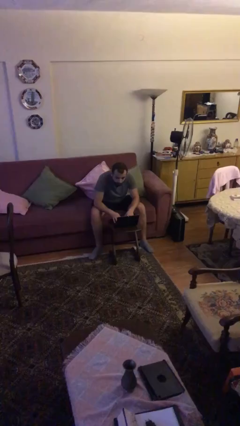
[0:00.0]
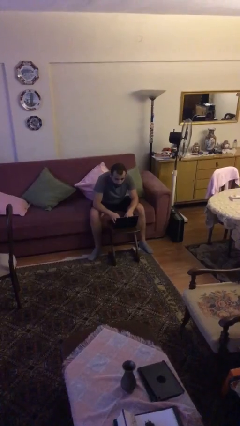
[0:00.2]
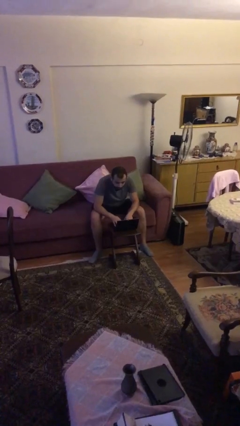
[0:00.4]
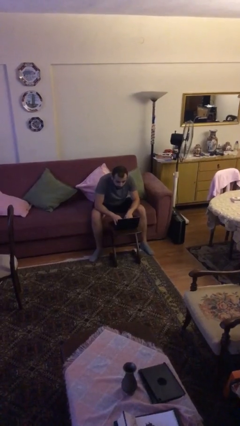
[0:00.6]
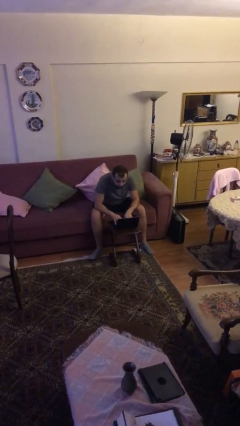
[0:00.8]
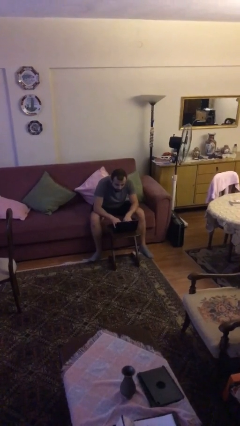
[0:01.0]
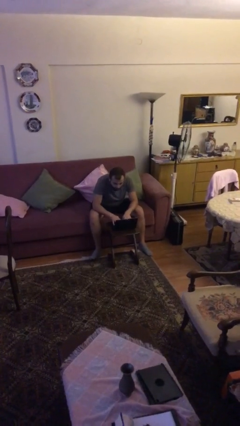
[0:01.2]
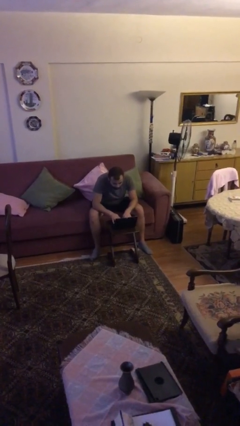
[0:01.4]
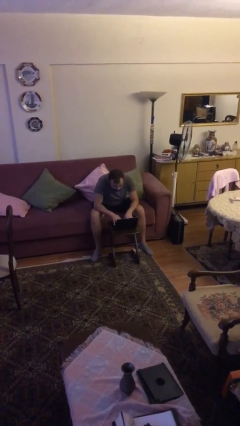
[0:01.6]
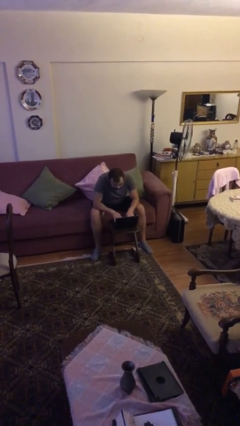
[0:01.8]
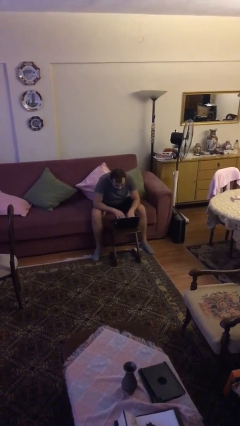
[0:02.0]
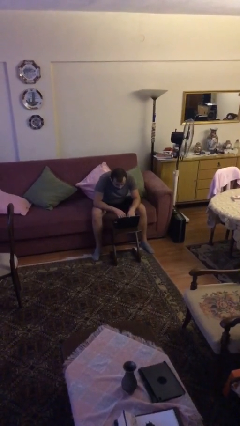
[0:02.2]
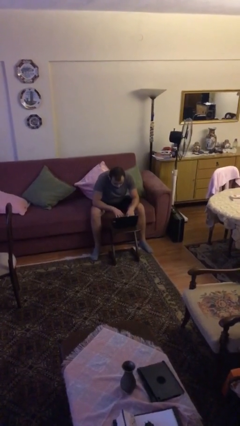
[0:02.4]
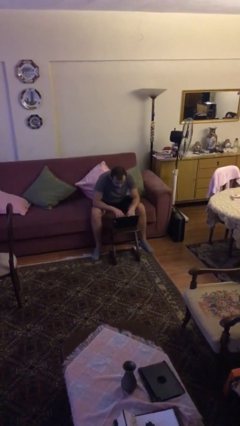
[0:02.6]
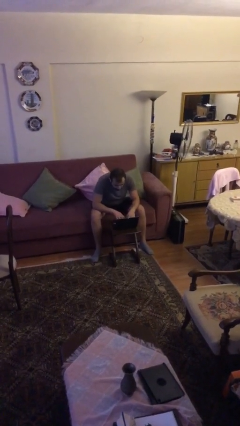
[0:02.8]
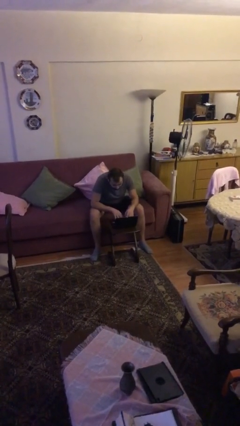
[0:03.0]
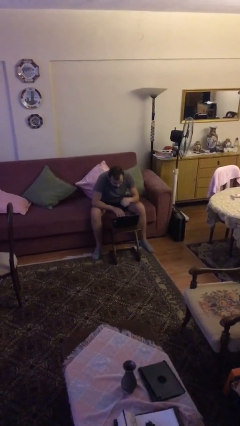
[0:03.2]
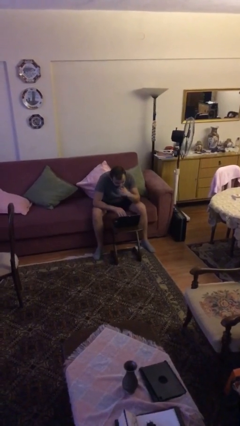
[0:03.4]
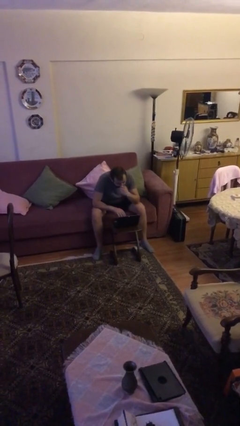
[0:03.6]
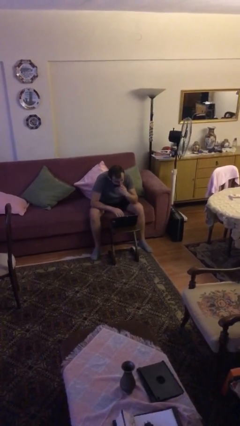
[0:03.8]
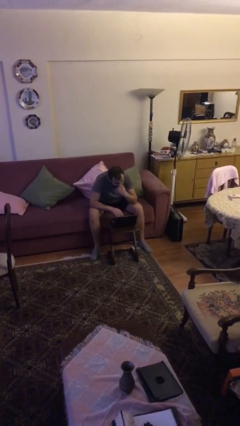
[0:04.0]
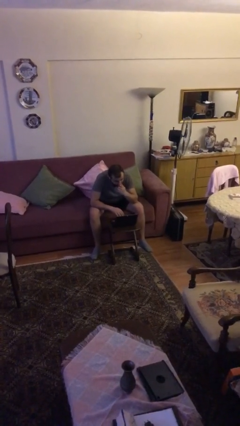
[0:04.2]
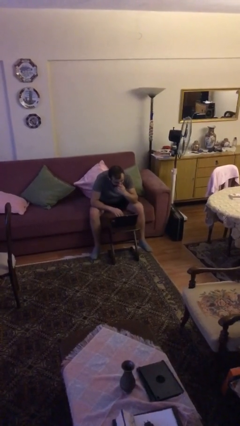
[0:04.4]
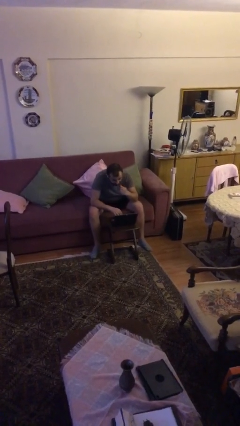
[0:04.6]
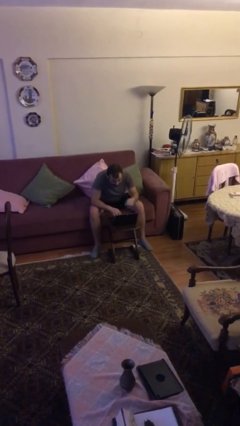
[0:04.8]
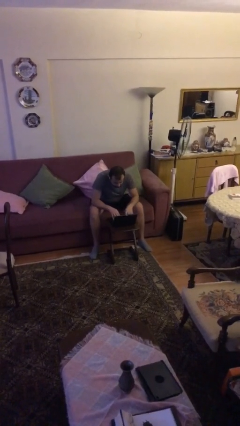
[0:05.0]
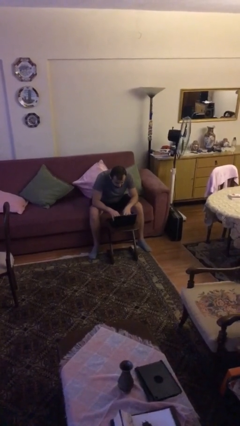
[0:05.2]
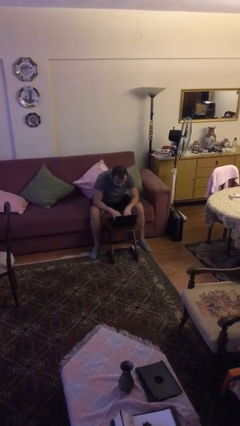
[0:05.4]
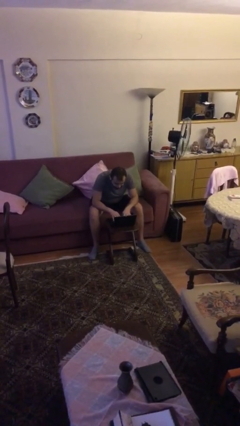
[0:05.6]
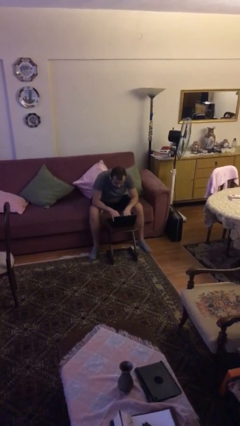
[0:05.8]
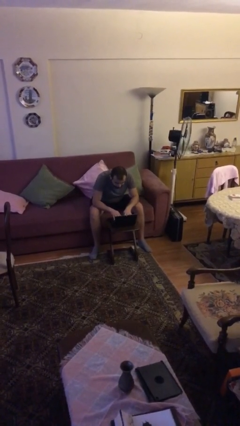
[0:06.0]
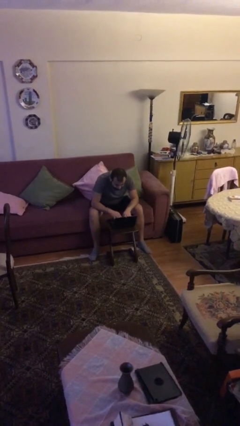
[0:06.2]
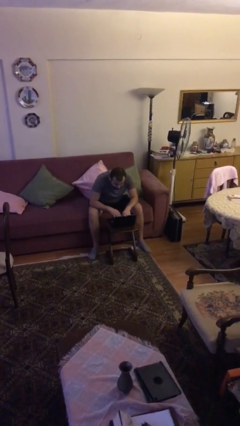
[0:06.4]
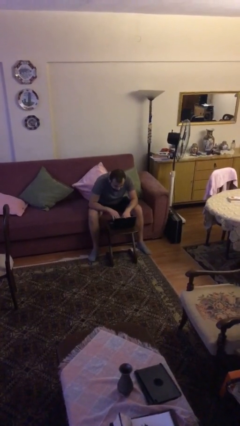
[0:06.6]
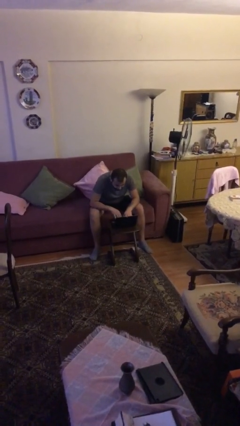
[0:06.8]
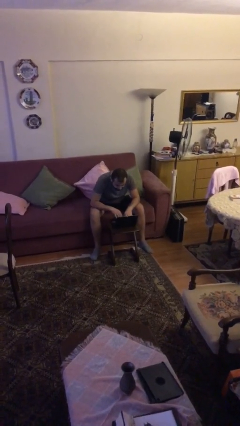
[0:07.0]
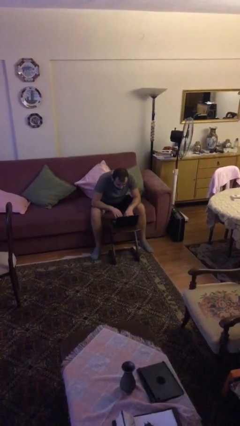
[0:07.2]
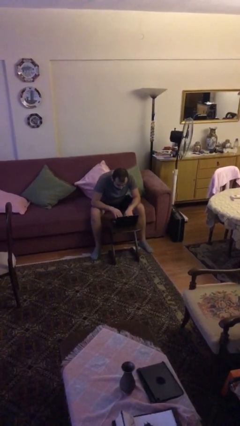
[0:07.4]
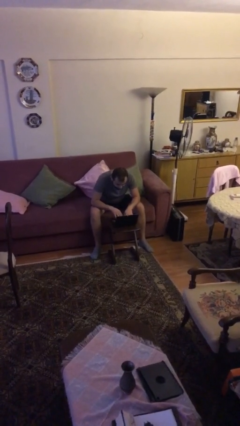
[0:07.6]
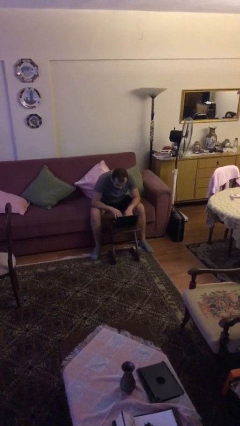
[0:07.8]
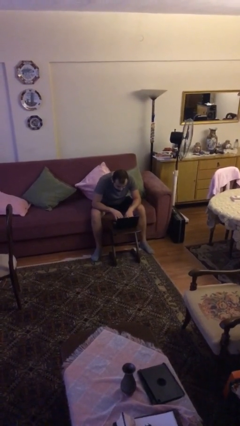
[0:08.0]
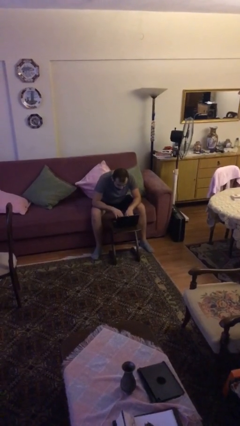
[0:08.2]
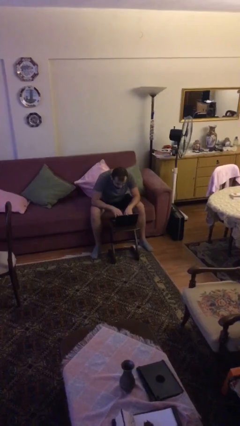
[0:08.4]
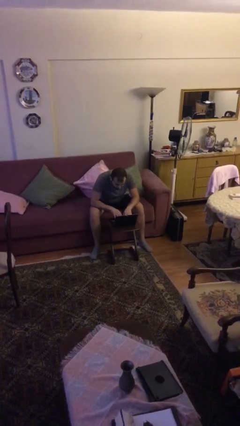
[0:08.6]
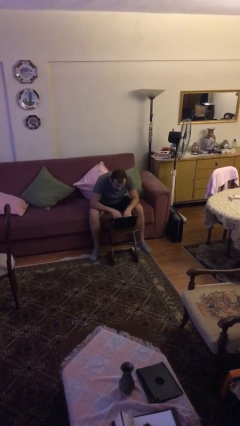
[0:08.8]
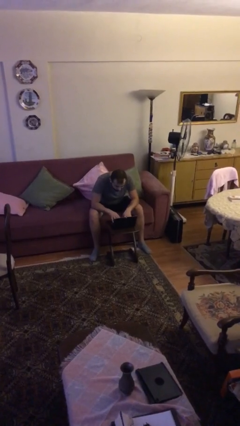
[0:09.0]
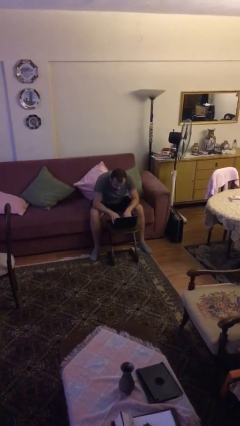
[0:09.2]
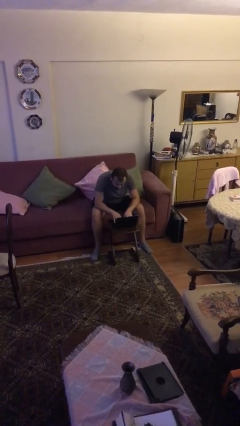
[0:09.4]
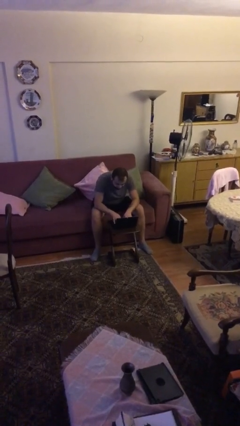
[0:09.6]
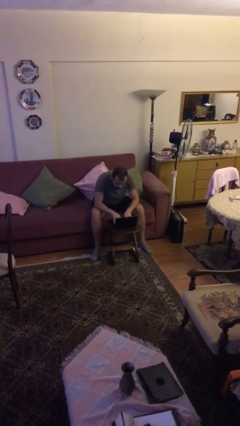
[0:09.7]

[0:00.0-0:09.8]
person interacts with laptop

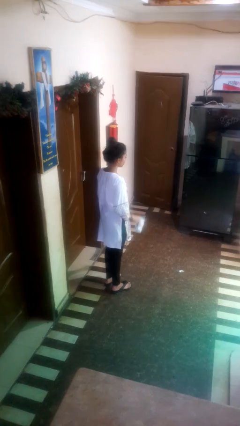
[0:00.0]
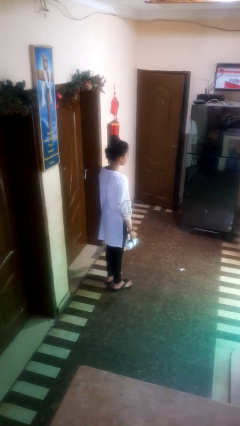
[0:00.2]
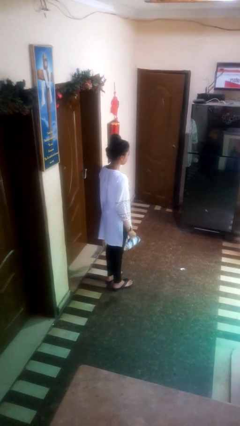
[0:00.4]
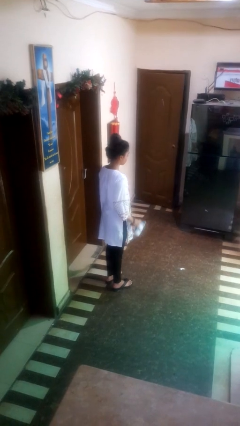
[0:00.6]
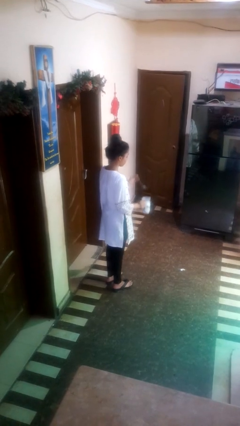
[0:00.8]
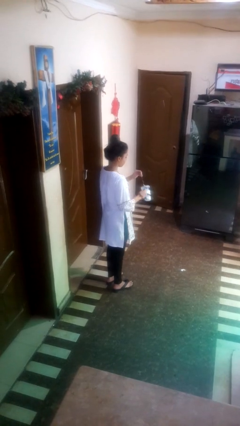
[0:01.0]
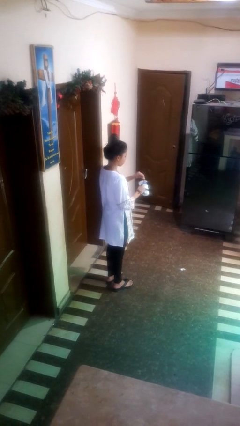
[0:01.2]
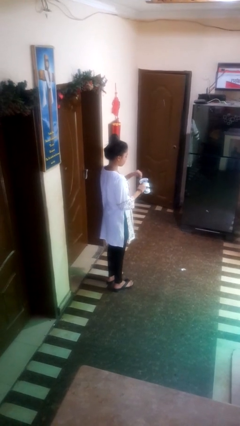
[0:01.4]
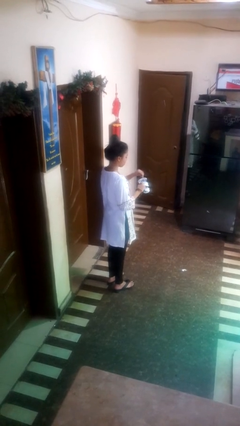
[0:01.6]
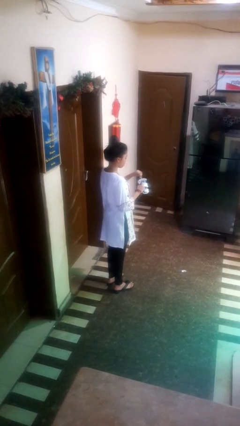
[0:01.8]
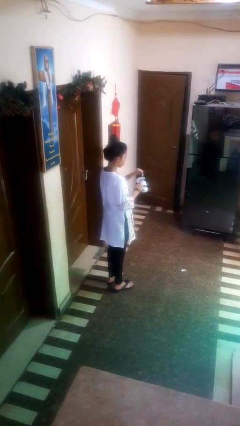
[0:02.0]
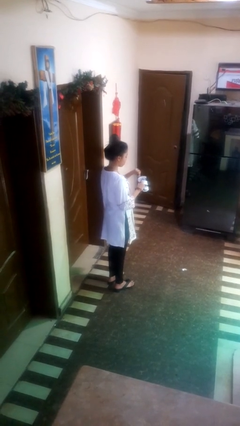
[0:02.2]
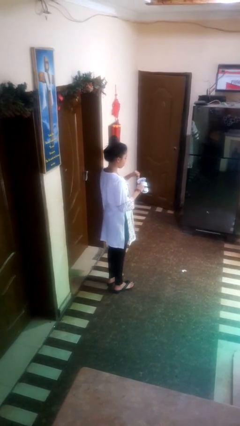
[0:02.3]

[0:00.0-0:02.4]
person stirs mug

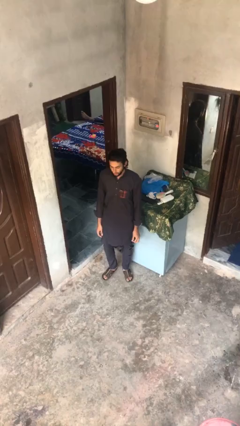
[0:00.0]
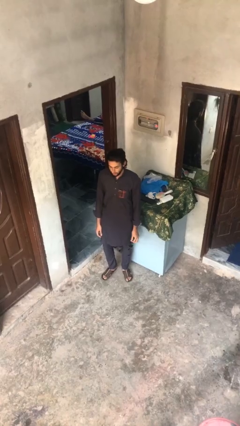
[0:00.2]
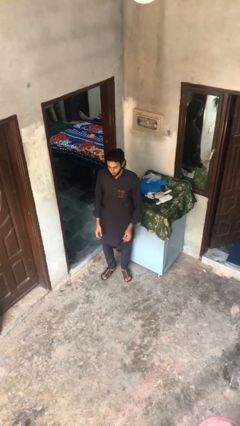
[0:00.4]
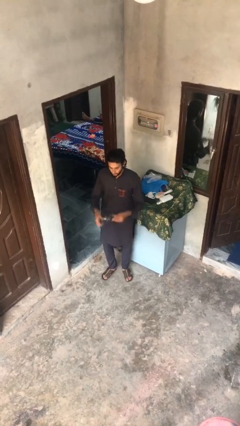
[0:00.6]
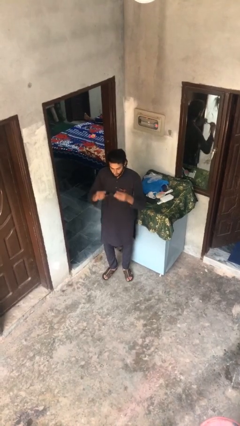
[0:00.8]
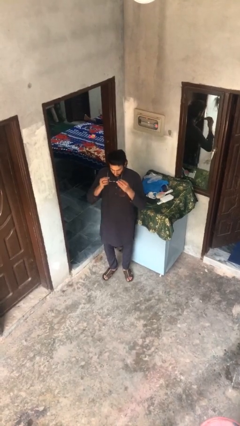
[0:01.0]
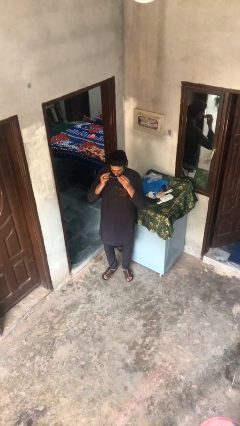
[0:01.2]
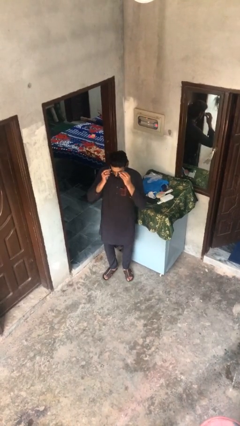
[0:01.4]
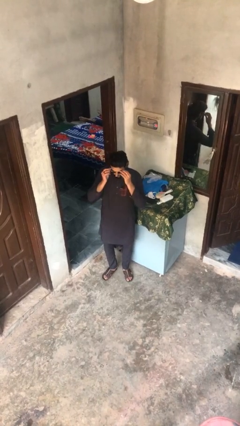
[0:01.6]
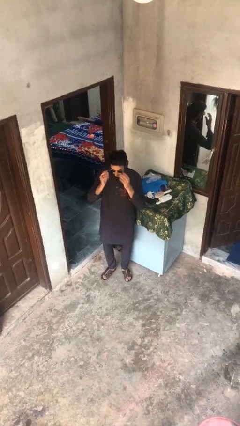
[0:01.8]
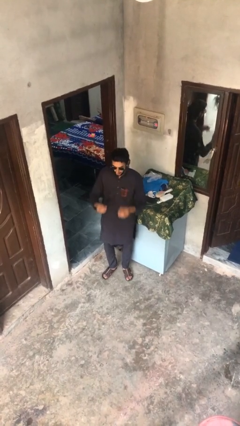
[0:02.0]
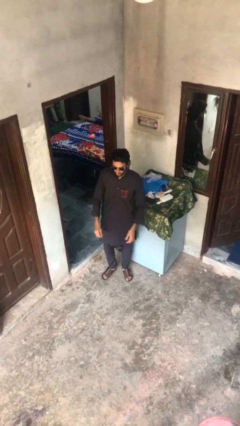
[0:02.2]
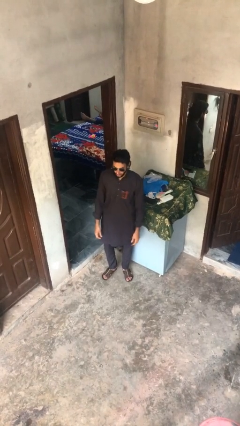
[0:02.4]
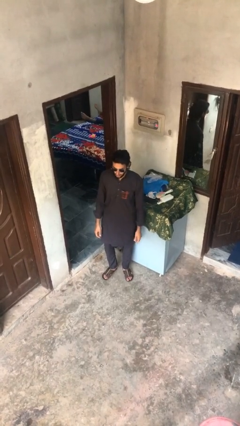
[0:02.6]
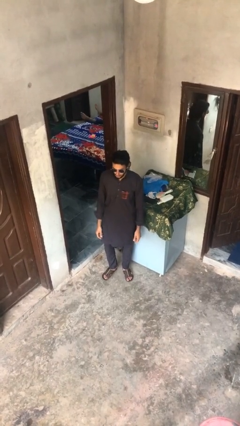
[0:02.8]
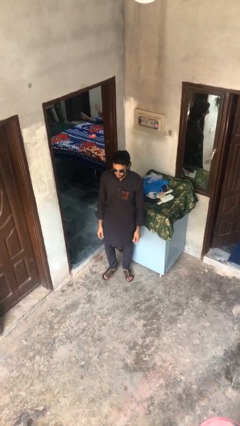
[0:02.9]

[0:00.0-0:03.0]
person puts on sunglasses

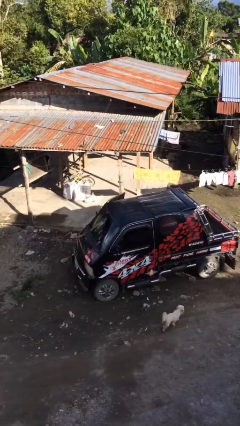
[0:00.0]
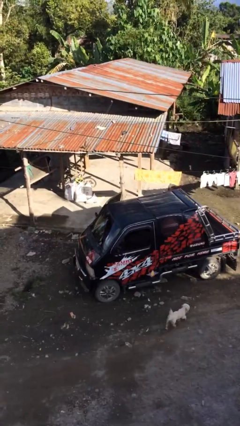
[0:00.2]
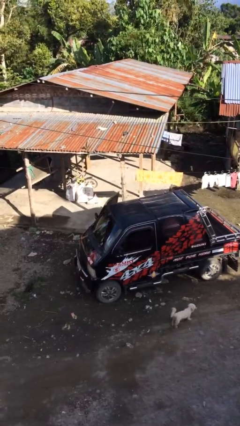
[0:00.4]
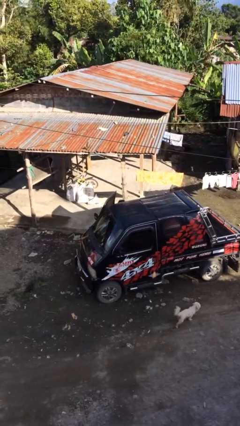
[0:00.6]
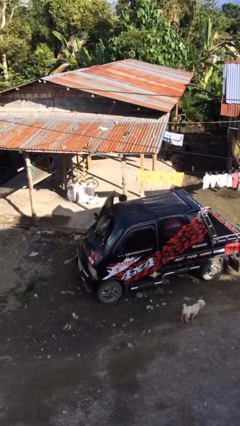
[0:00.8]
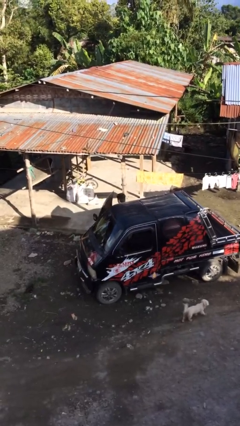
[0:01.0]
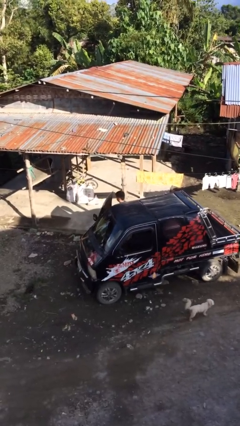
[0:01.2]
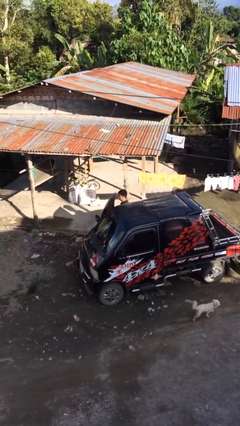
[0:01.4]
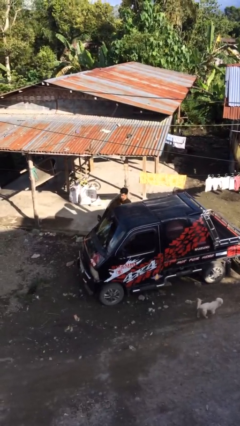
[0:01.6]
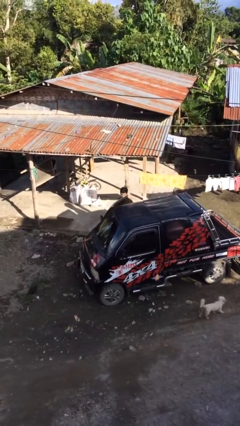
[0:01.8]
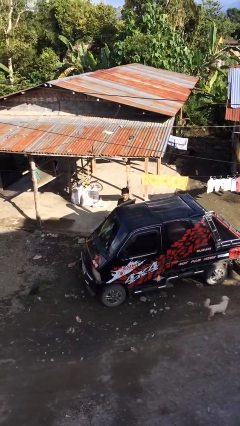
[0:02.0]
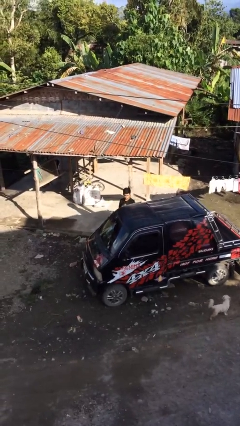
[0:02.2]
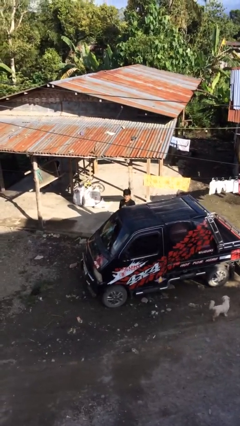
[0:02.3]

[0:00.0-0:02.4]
person exits car

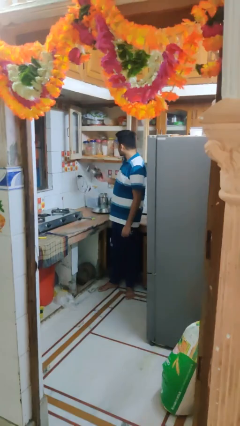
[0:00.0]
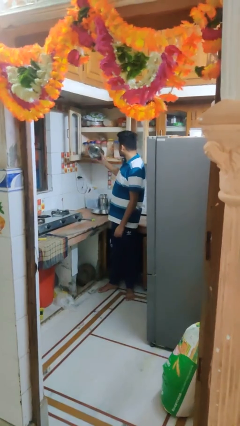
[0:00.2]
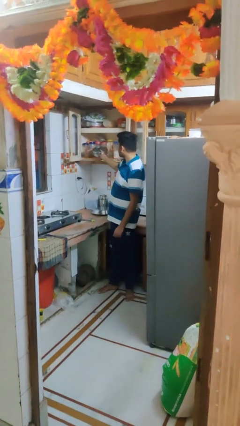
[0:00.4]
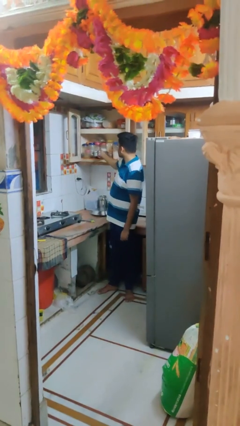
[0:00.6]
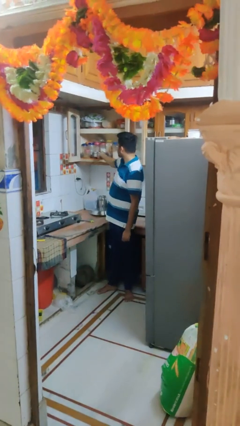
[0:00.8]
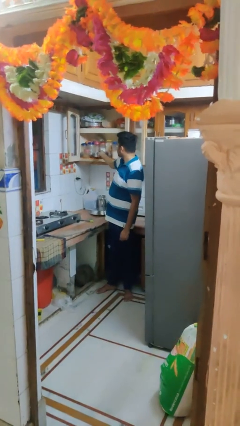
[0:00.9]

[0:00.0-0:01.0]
person puts object in cabinet
